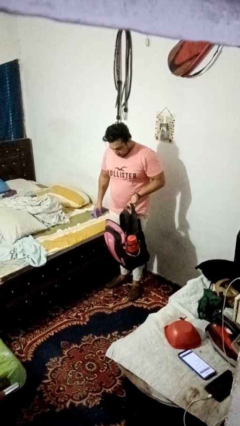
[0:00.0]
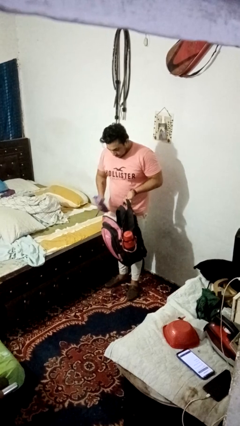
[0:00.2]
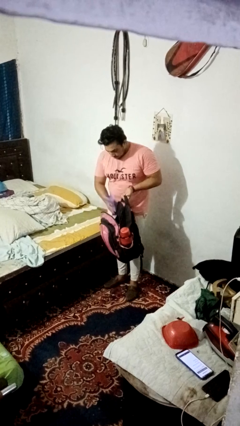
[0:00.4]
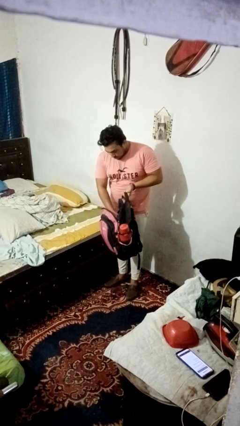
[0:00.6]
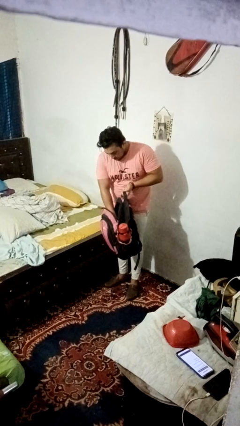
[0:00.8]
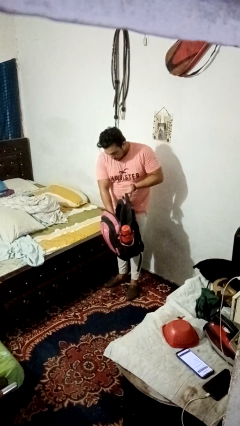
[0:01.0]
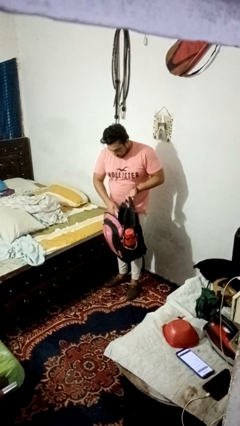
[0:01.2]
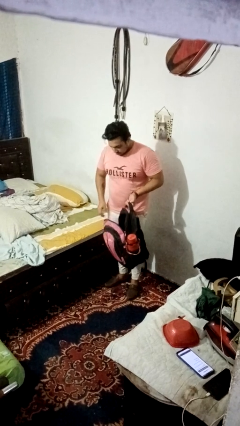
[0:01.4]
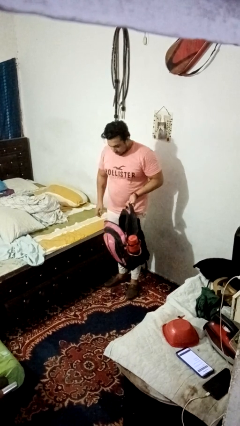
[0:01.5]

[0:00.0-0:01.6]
person puts object into bag

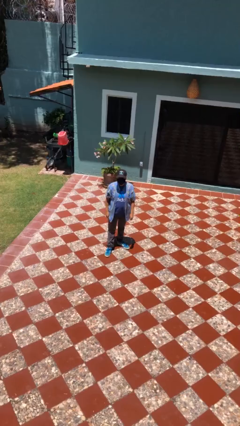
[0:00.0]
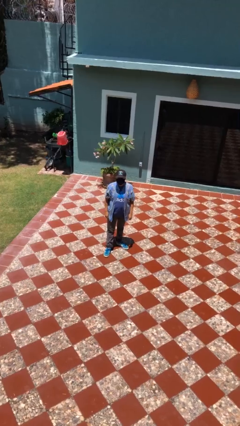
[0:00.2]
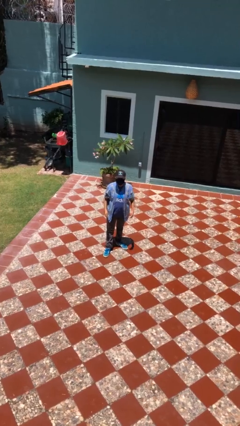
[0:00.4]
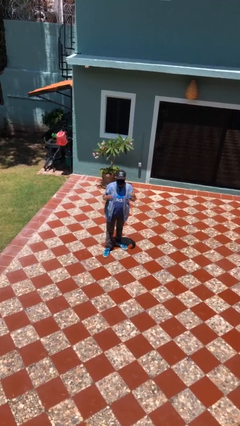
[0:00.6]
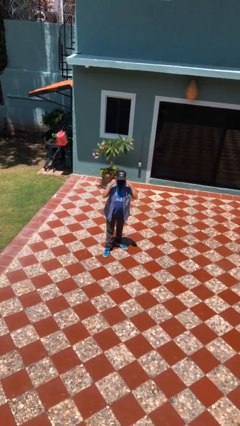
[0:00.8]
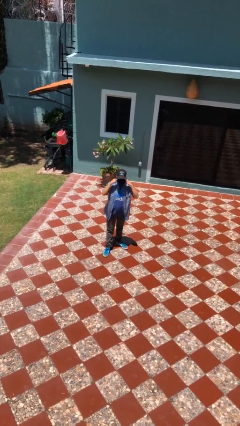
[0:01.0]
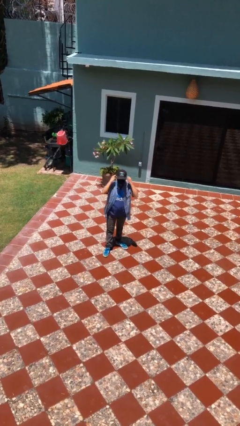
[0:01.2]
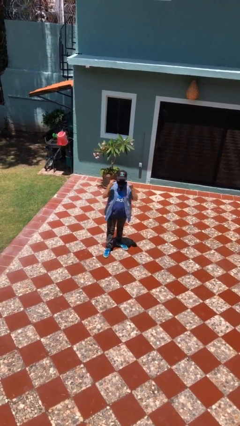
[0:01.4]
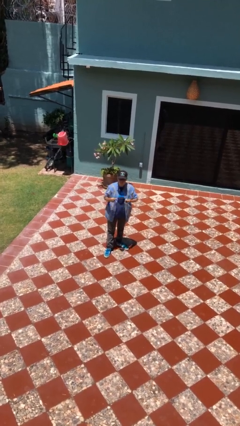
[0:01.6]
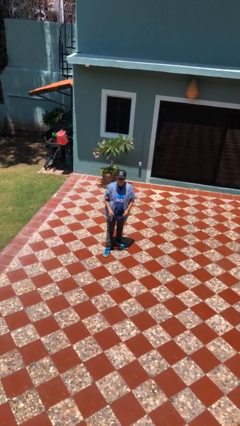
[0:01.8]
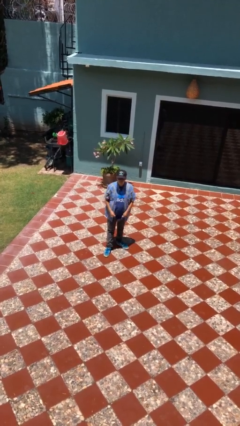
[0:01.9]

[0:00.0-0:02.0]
person takes off facemask

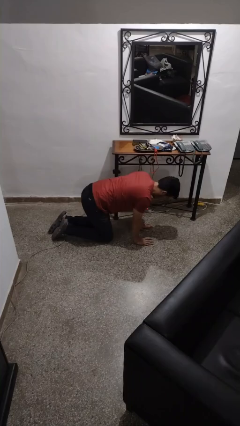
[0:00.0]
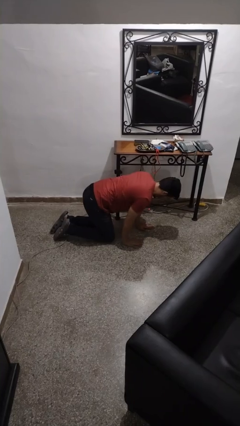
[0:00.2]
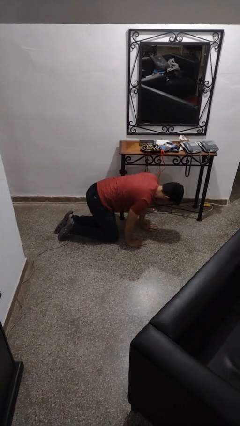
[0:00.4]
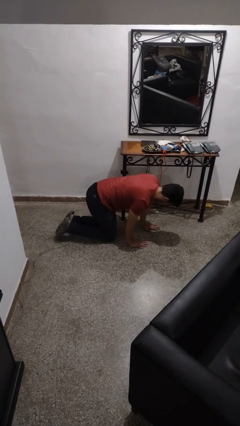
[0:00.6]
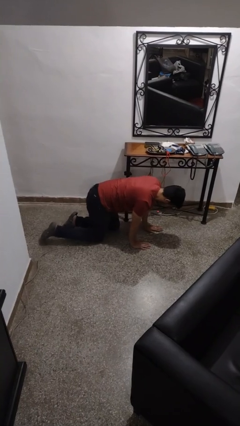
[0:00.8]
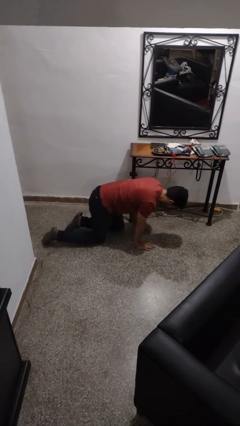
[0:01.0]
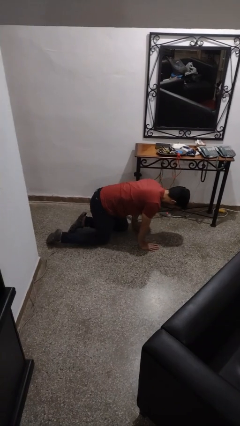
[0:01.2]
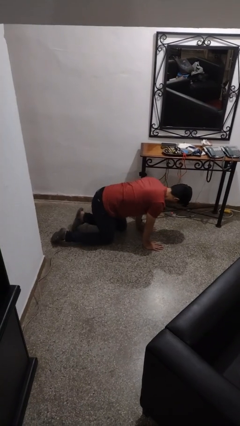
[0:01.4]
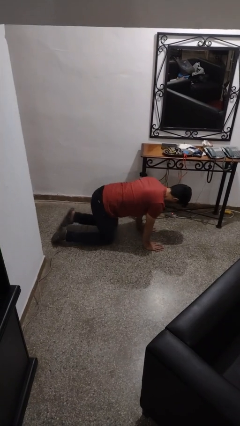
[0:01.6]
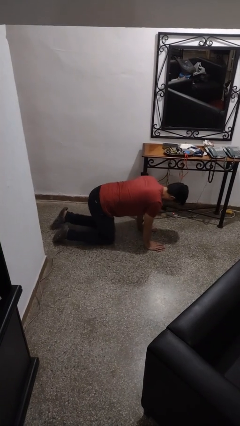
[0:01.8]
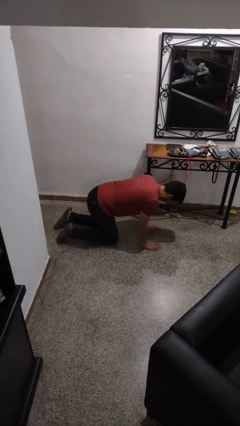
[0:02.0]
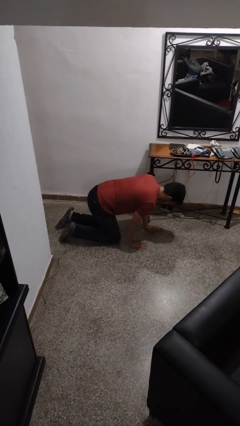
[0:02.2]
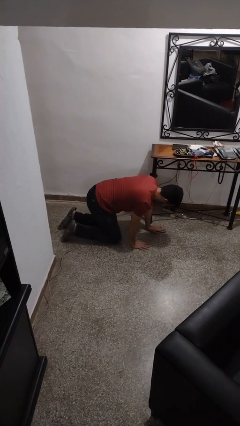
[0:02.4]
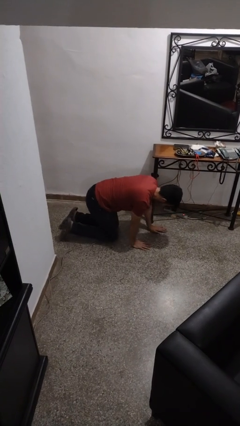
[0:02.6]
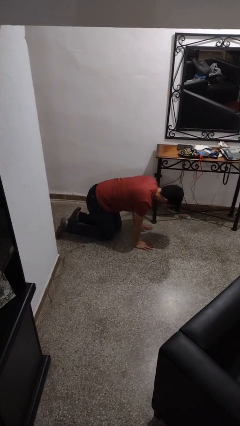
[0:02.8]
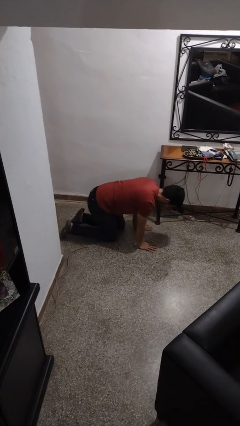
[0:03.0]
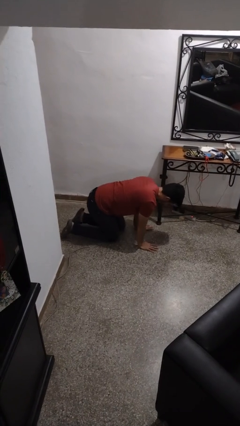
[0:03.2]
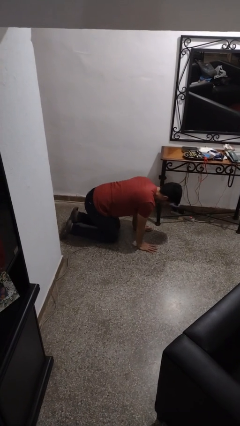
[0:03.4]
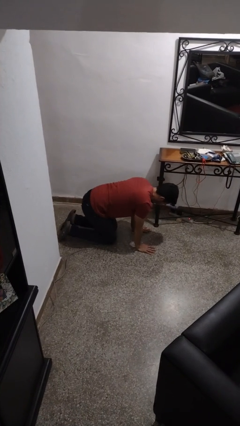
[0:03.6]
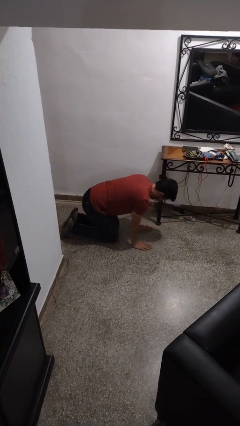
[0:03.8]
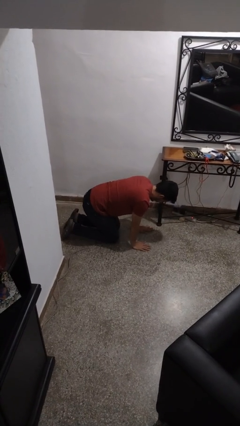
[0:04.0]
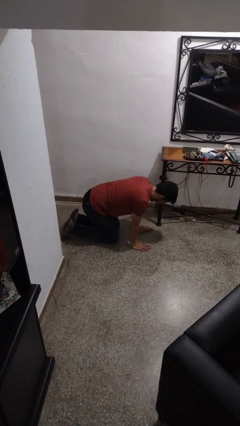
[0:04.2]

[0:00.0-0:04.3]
person crawls

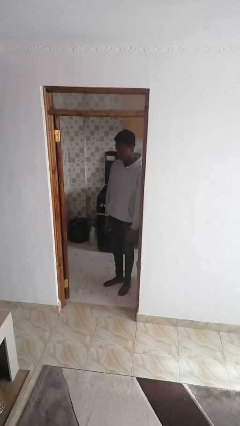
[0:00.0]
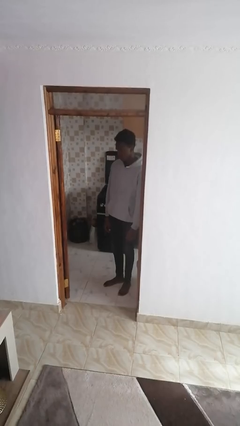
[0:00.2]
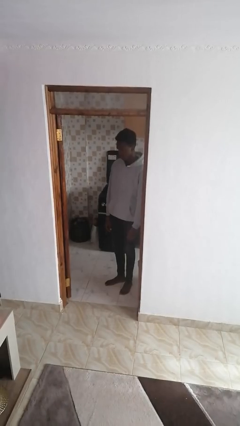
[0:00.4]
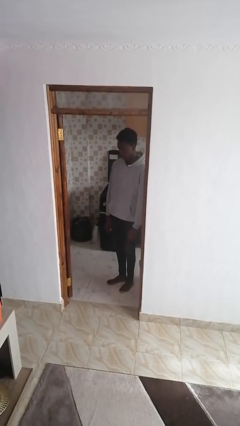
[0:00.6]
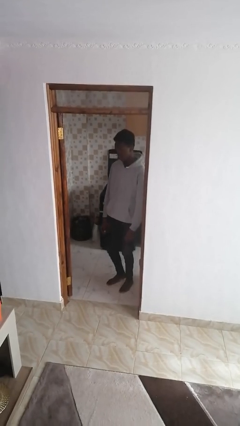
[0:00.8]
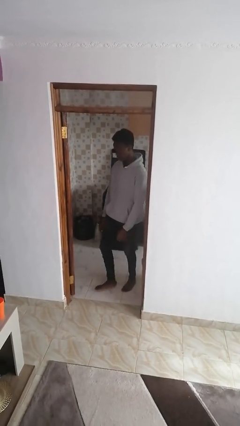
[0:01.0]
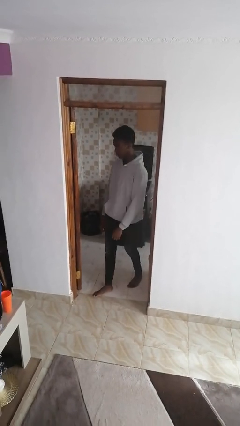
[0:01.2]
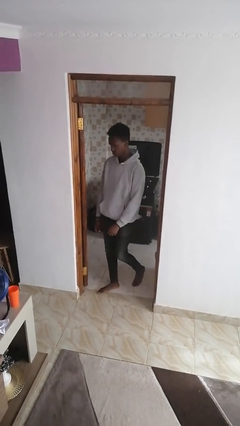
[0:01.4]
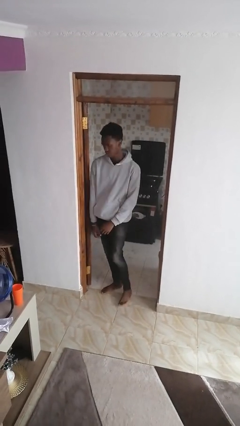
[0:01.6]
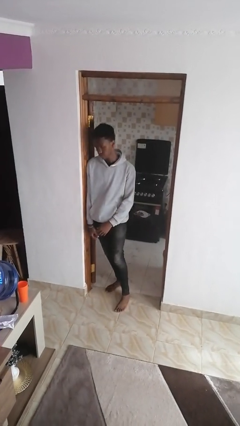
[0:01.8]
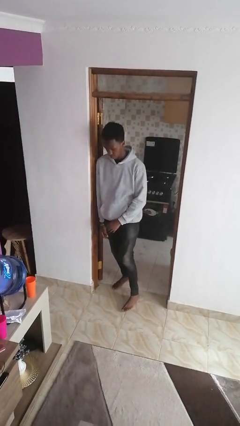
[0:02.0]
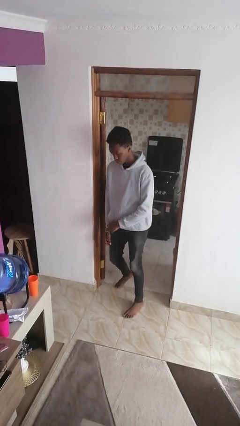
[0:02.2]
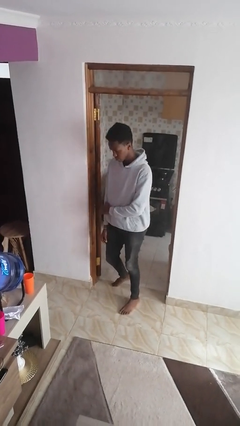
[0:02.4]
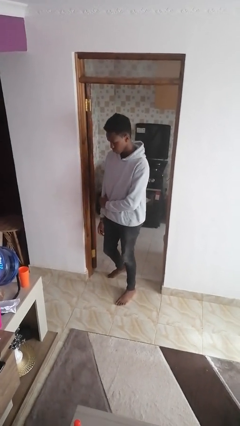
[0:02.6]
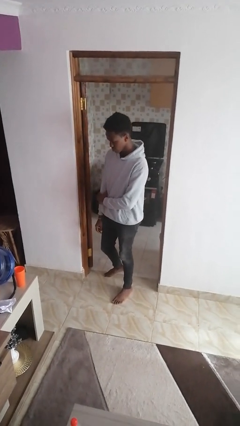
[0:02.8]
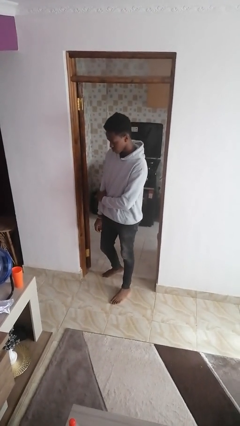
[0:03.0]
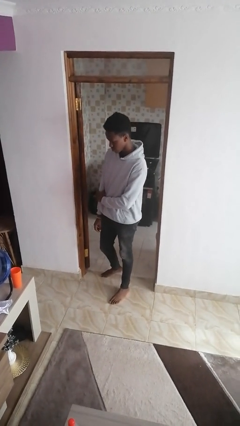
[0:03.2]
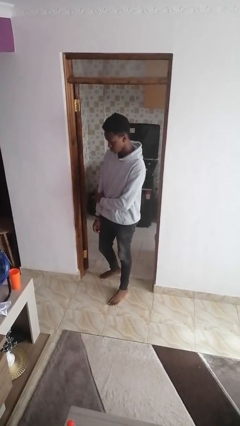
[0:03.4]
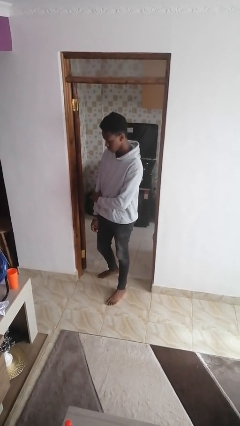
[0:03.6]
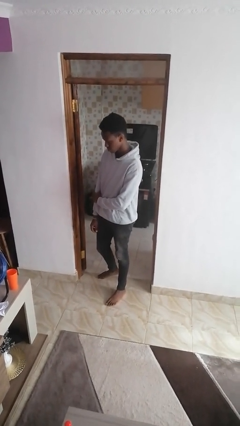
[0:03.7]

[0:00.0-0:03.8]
person bumps into wall

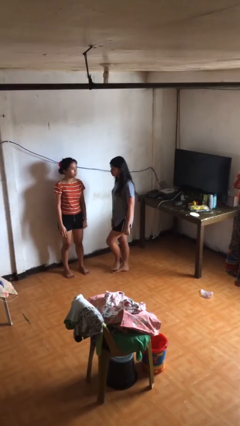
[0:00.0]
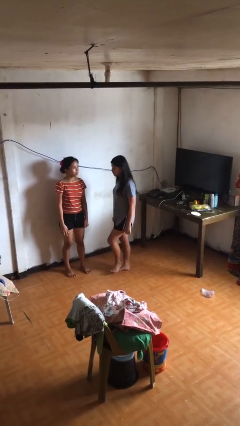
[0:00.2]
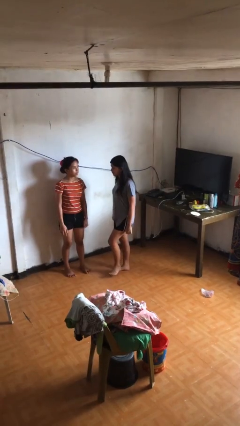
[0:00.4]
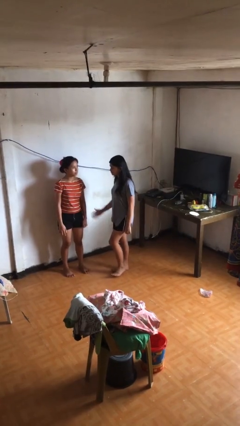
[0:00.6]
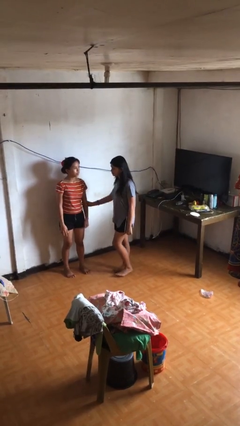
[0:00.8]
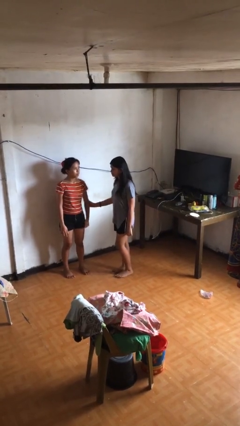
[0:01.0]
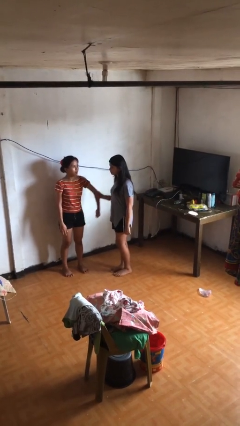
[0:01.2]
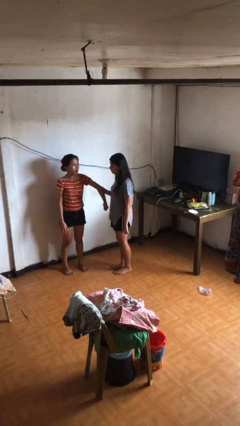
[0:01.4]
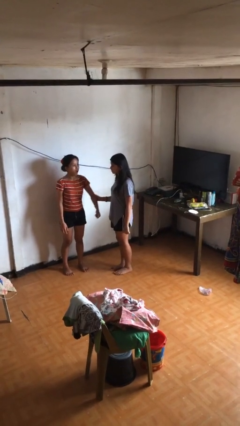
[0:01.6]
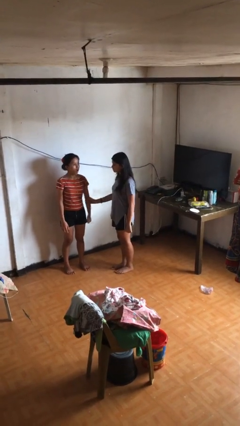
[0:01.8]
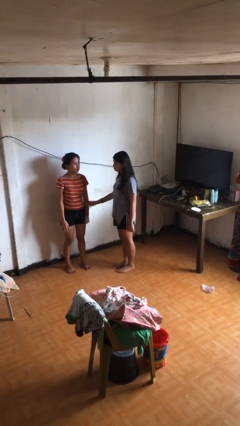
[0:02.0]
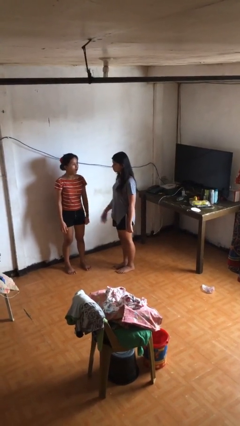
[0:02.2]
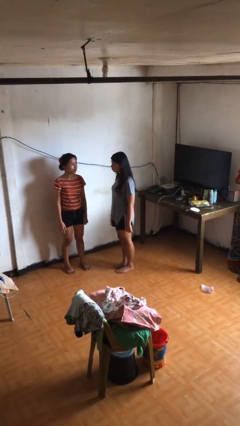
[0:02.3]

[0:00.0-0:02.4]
person grabs person by forearm

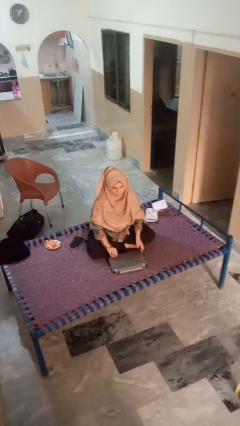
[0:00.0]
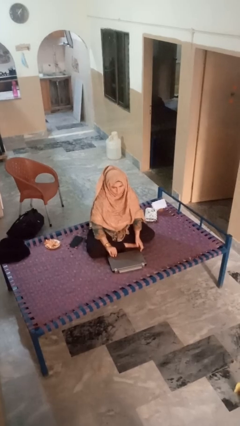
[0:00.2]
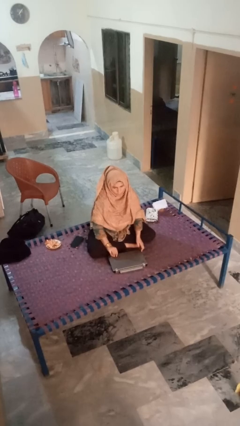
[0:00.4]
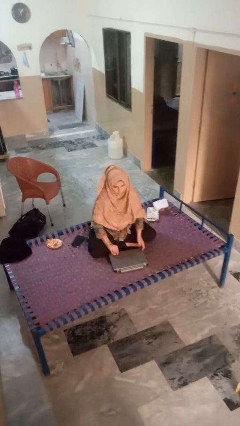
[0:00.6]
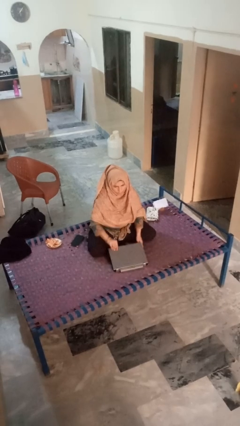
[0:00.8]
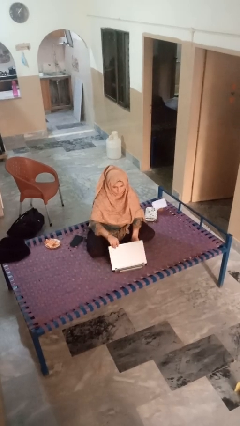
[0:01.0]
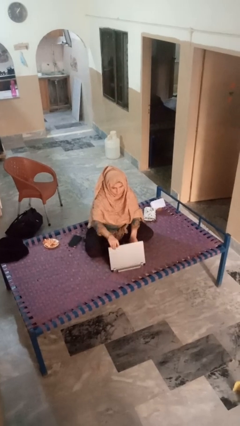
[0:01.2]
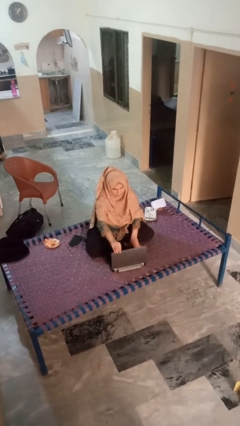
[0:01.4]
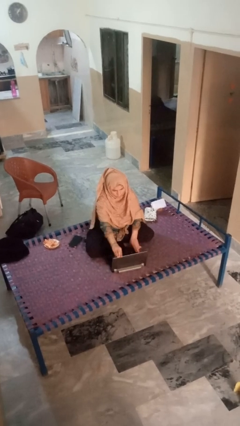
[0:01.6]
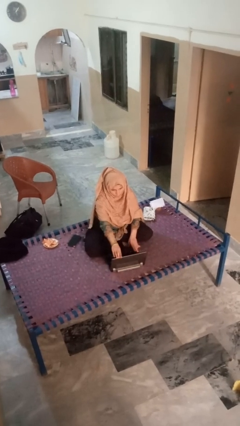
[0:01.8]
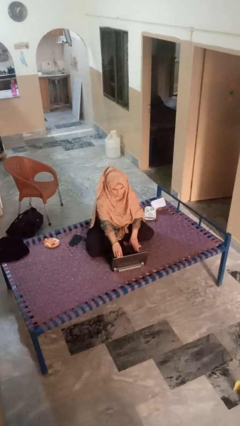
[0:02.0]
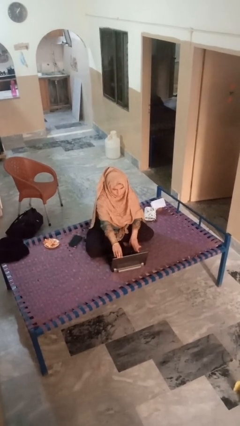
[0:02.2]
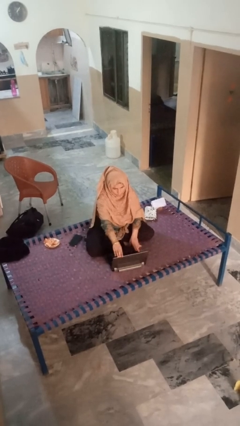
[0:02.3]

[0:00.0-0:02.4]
person opens laptop

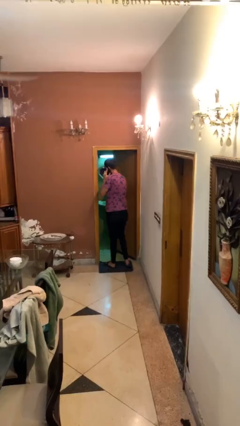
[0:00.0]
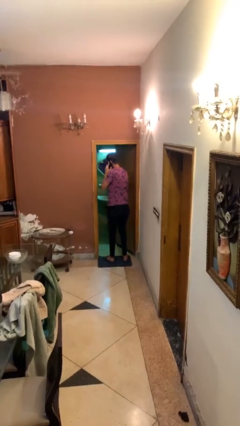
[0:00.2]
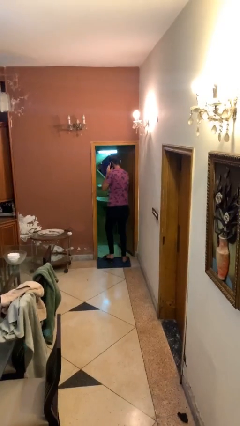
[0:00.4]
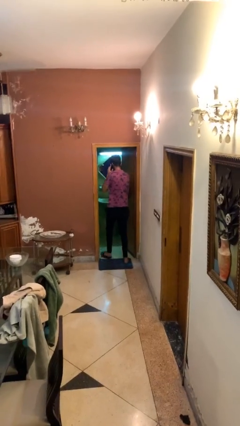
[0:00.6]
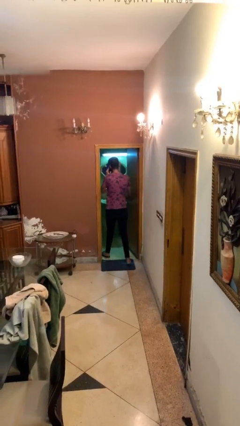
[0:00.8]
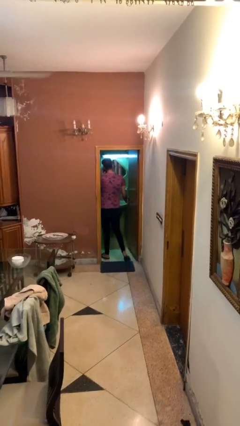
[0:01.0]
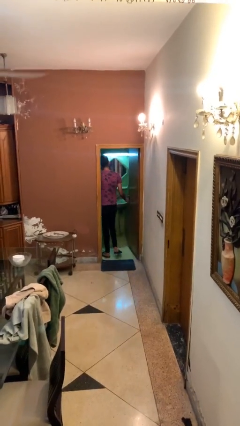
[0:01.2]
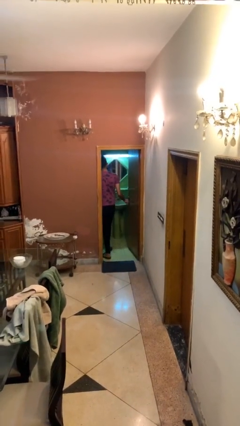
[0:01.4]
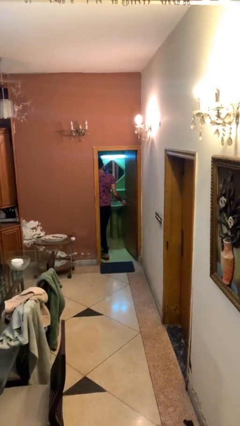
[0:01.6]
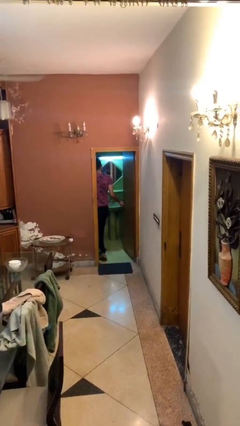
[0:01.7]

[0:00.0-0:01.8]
person exits scene through structure
